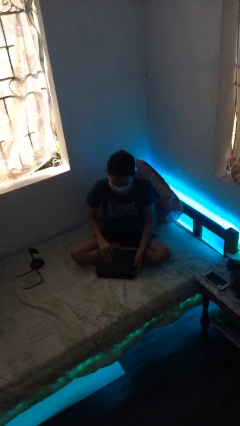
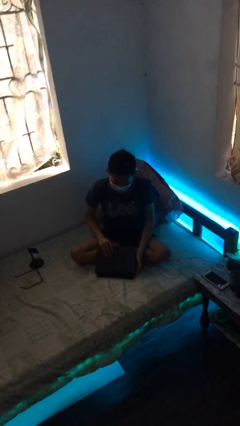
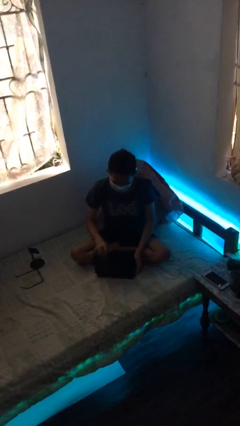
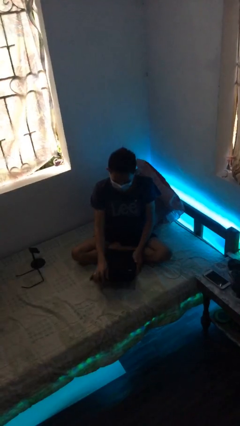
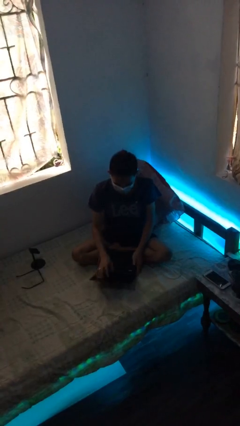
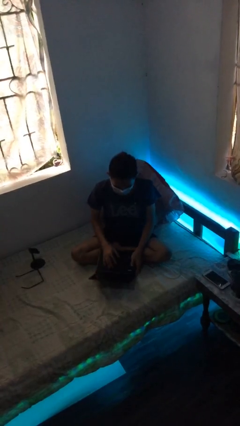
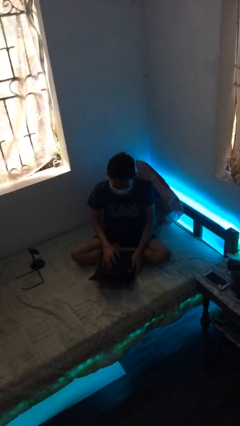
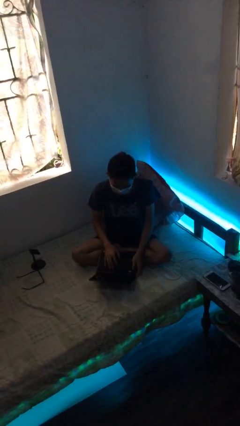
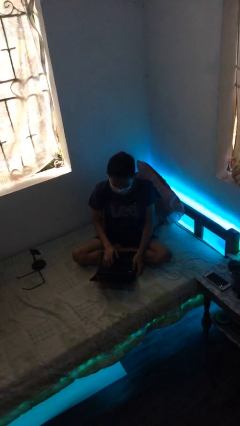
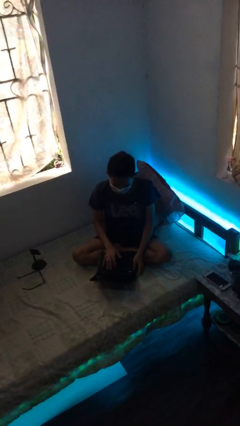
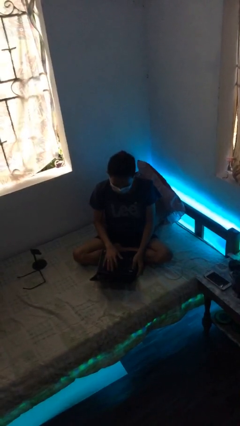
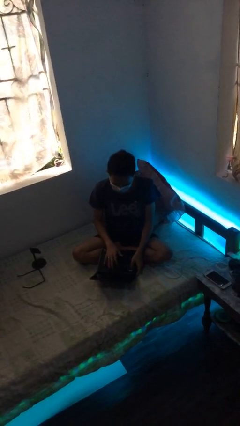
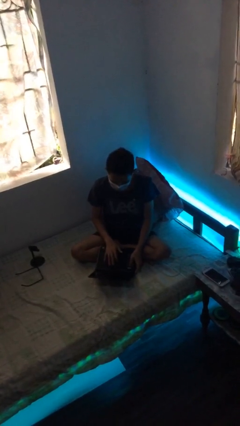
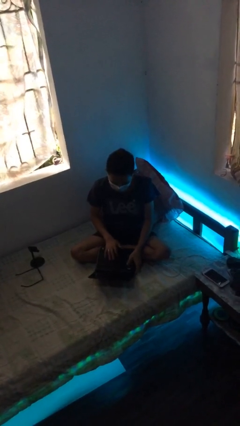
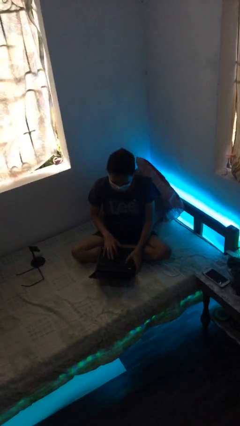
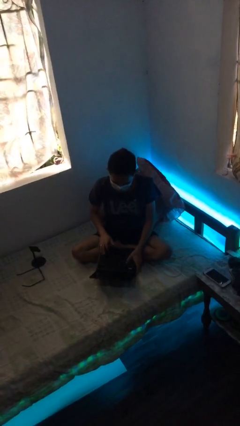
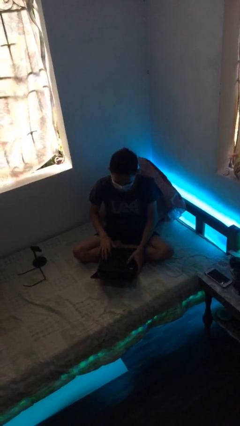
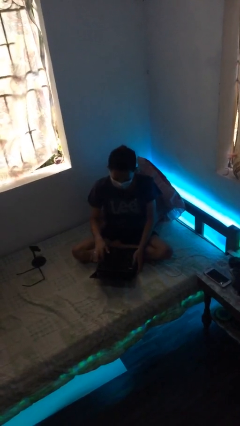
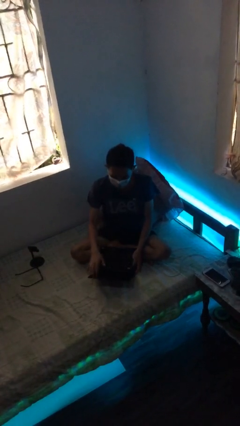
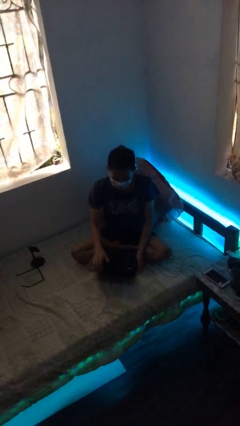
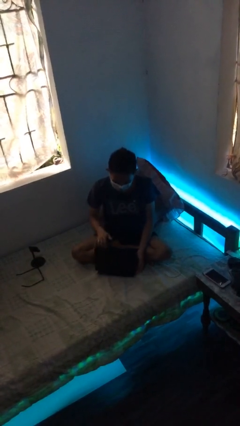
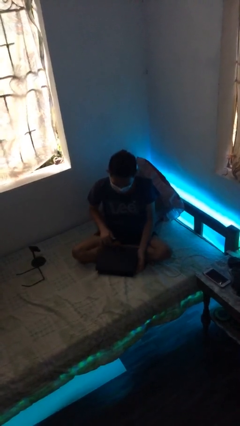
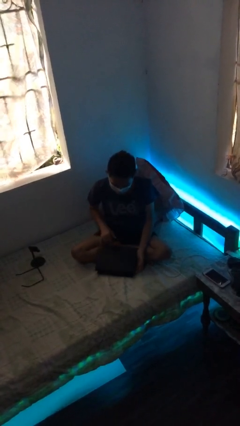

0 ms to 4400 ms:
person interacts with laptop

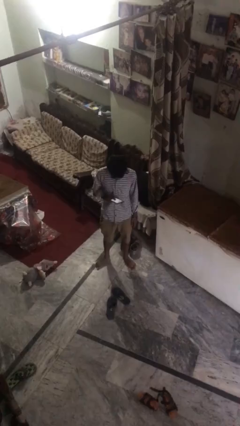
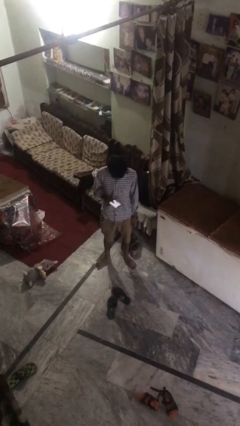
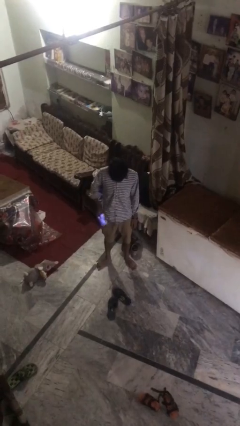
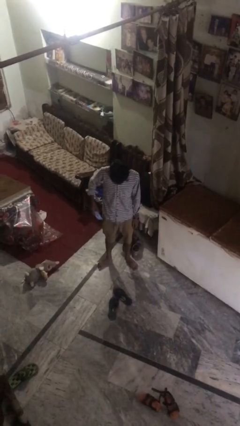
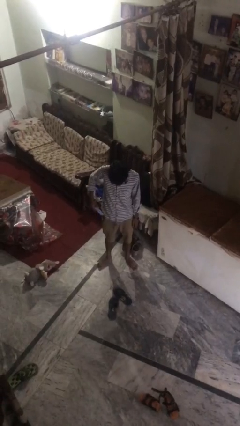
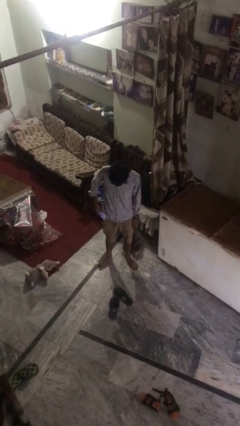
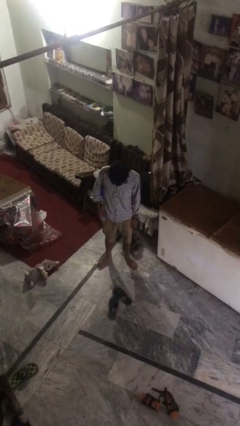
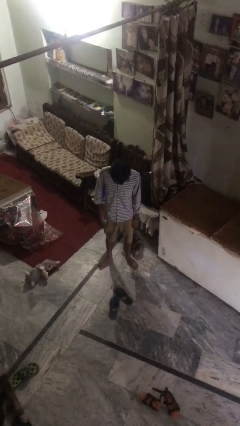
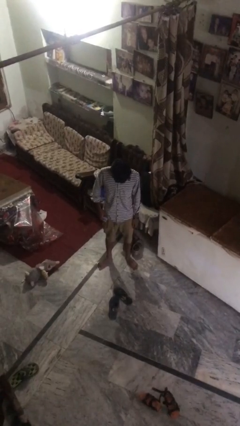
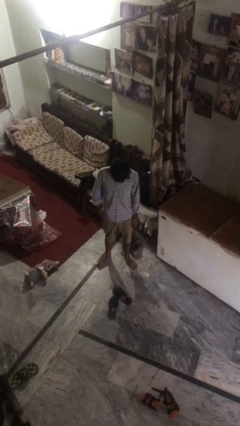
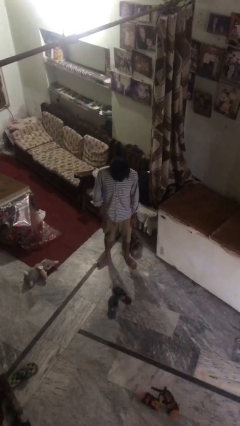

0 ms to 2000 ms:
person puts phone into pocket

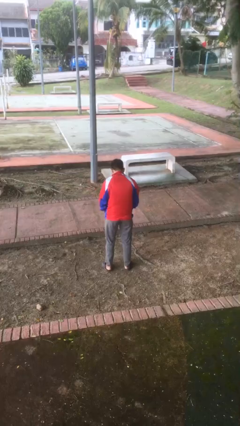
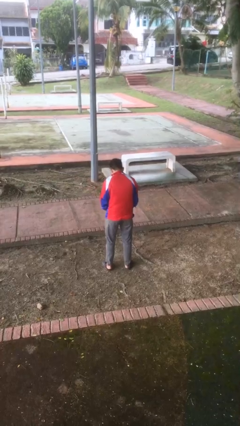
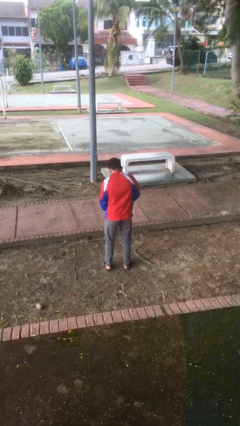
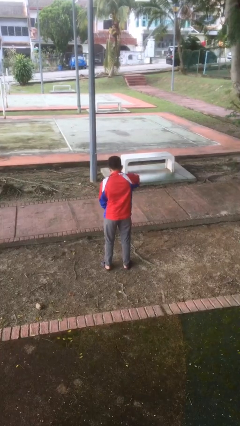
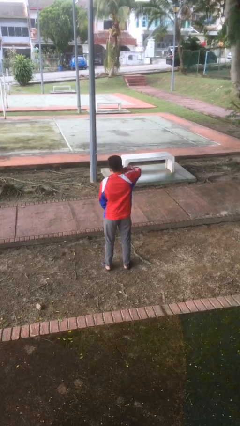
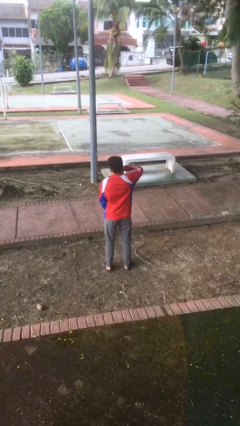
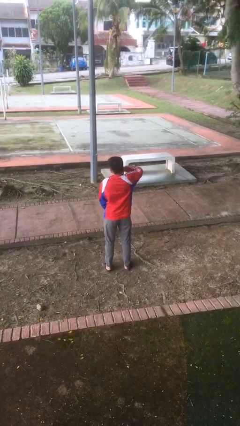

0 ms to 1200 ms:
person zips up jacket

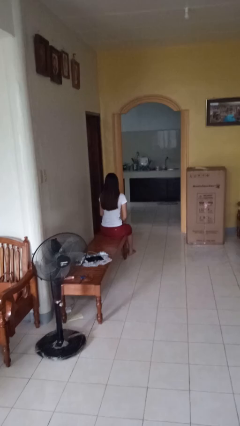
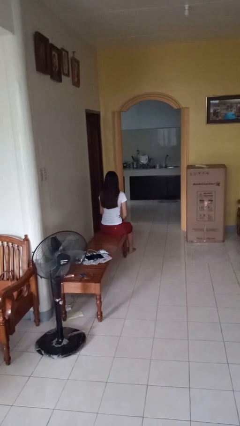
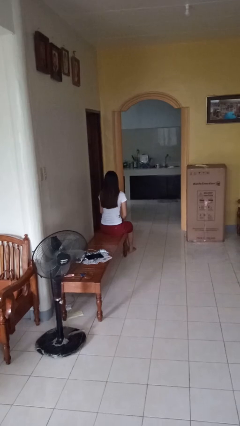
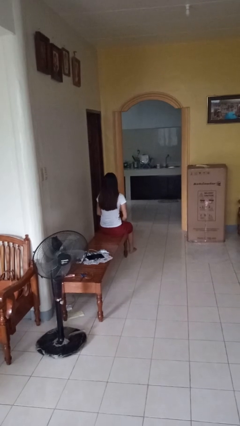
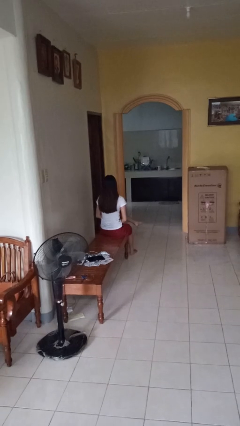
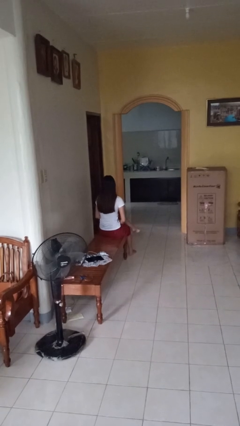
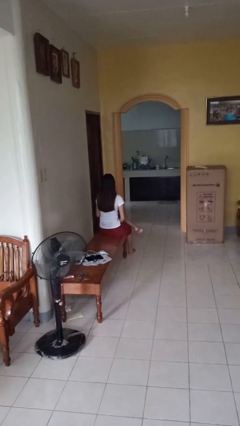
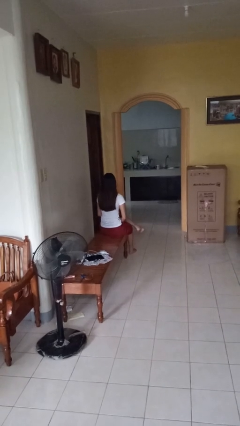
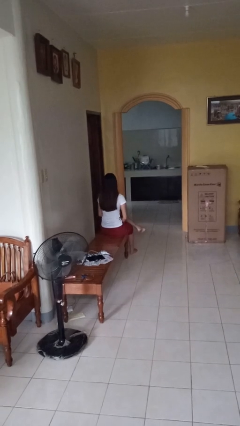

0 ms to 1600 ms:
person crosses legs

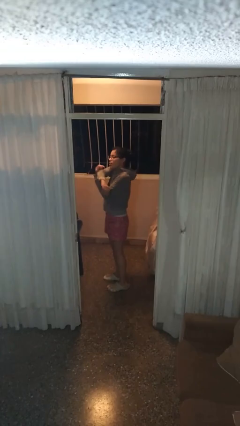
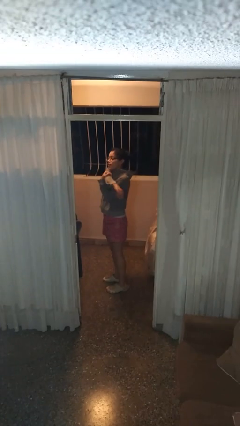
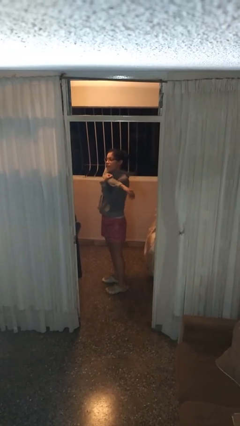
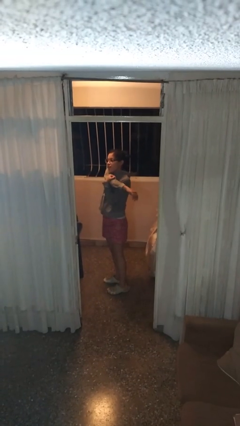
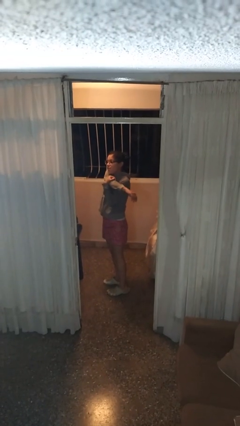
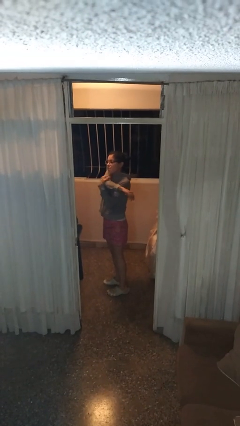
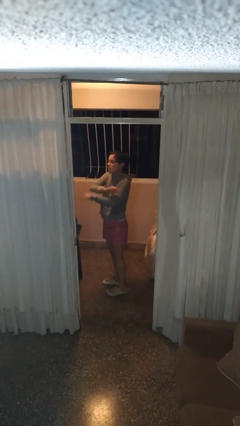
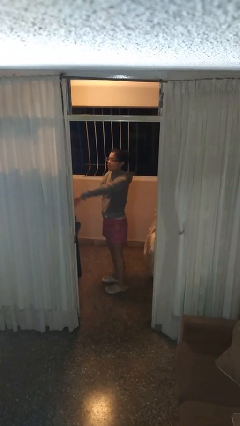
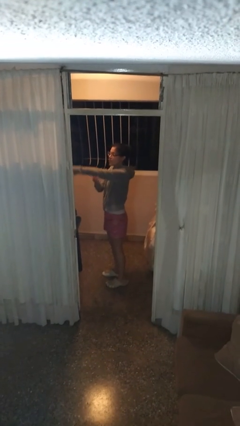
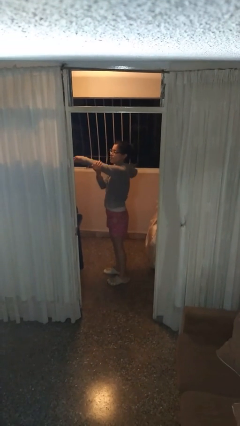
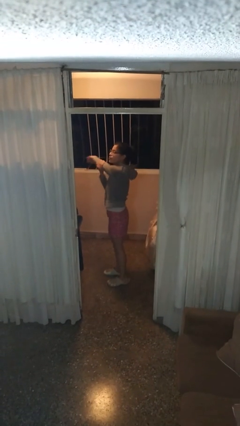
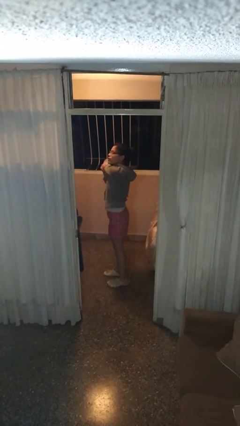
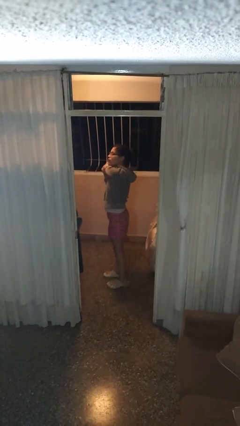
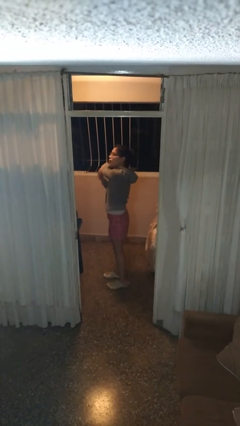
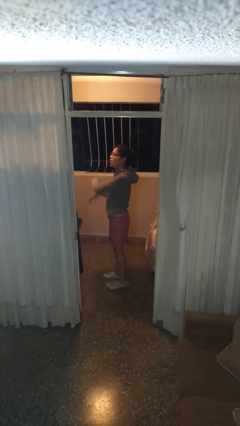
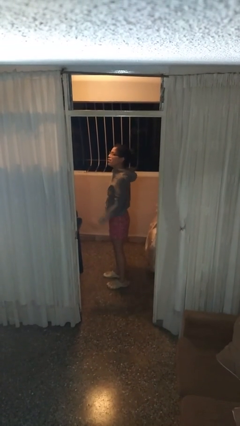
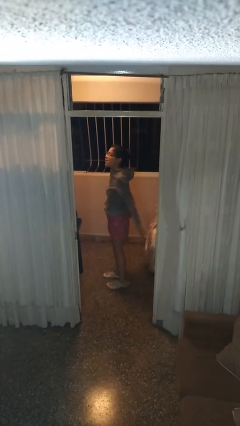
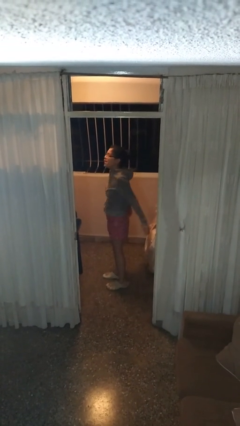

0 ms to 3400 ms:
person stretches arms to side

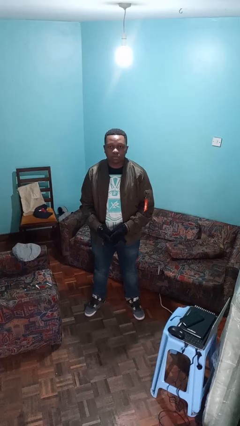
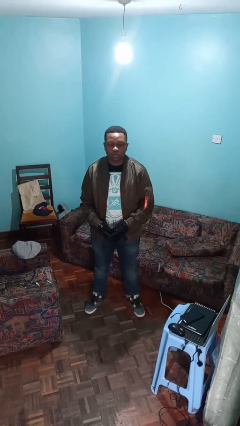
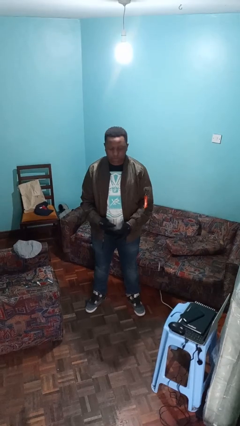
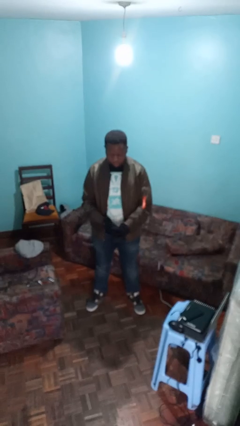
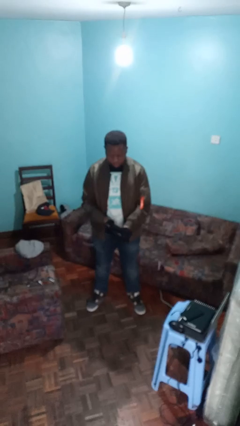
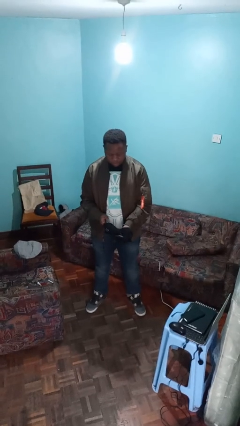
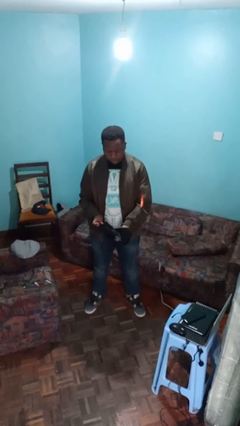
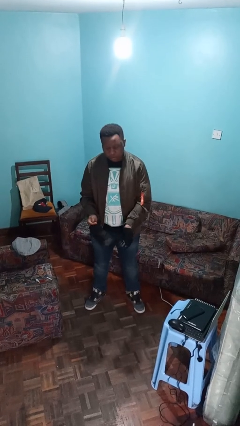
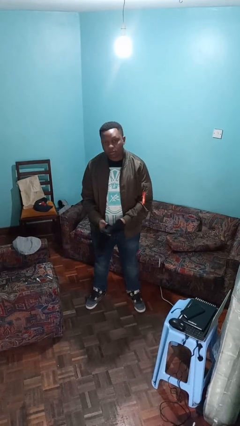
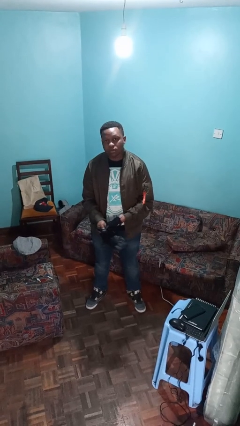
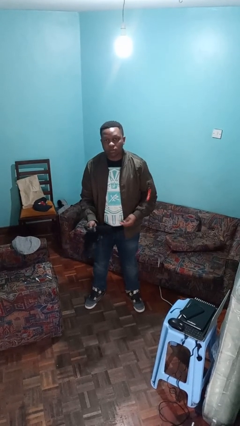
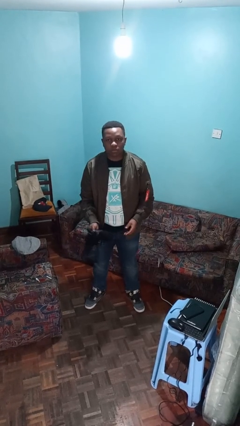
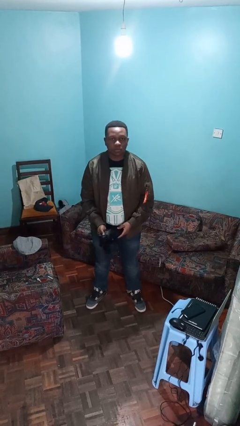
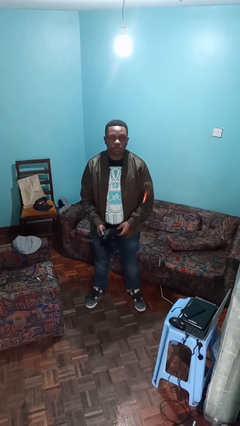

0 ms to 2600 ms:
person takes off gloves

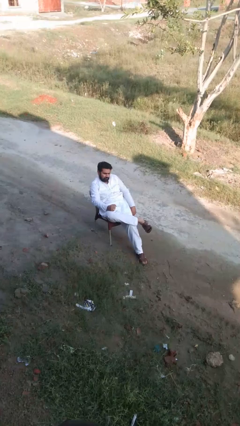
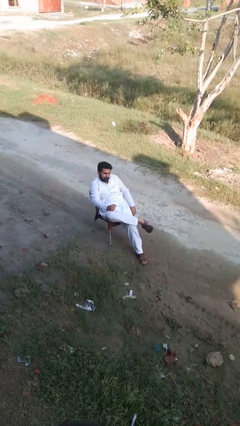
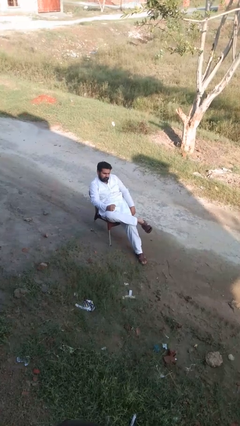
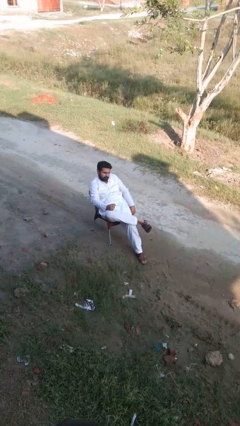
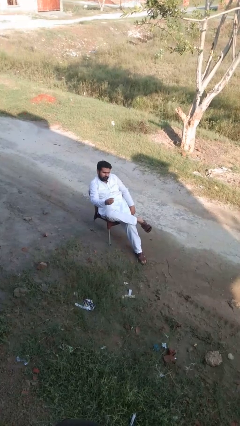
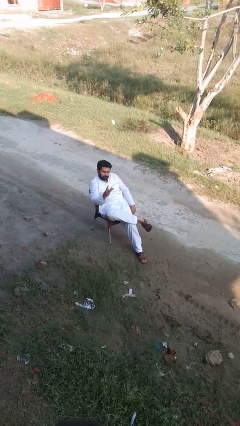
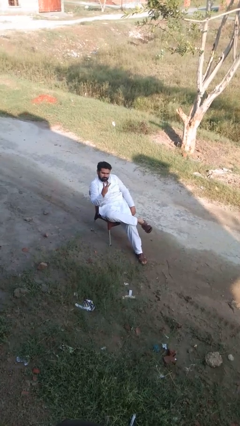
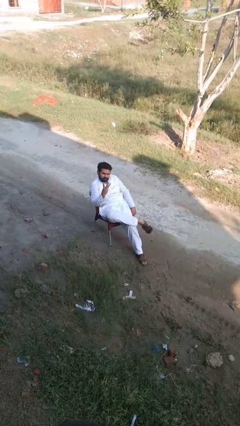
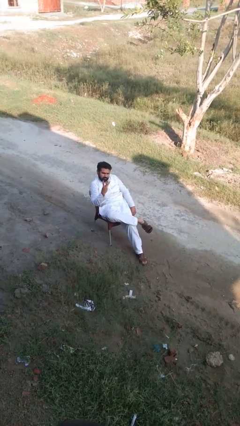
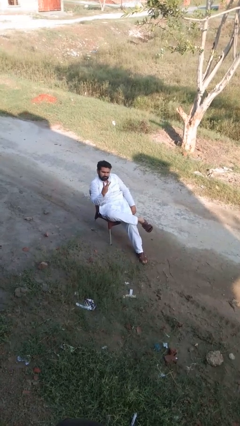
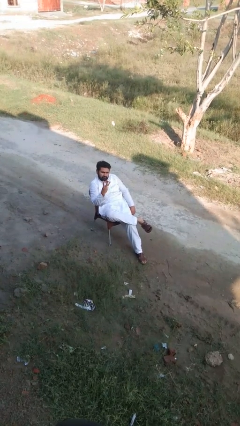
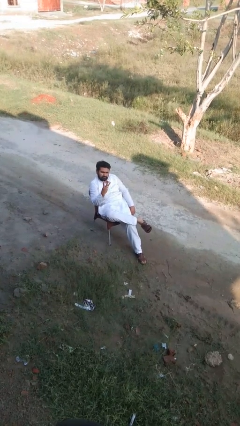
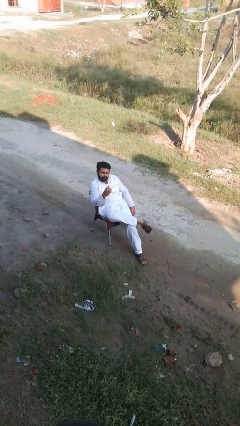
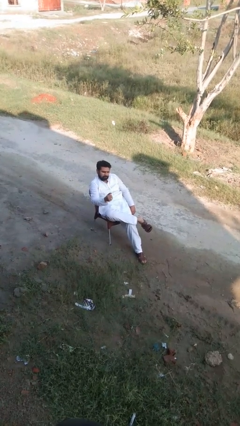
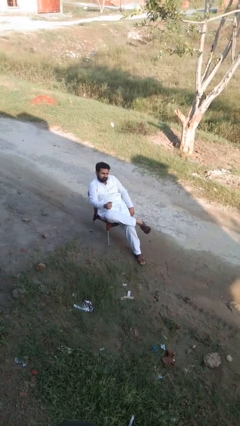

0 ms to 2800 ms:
person gestures number three
